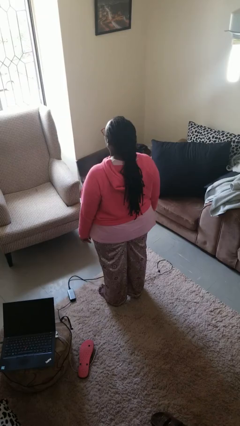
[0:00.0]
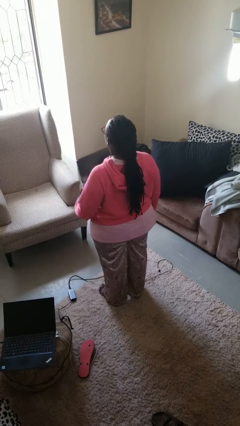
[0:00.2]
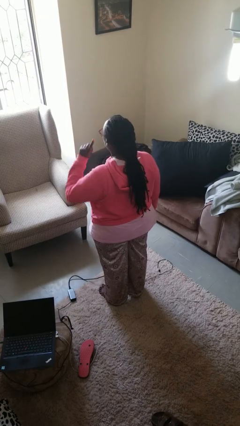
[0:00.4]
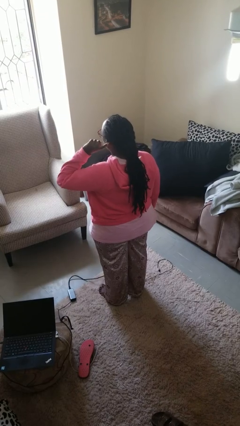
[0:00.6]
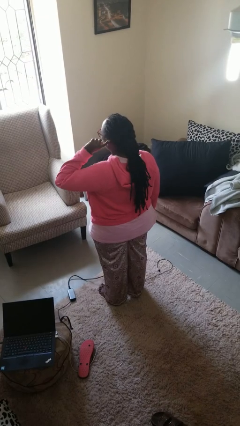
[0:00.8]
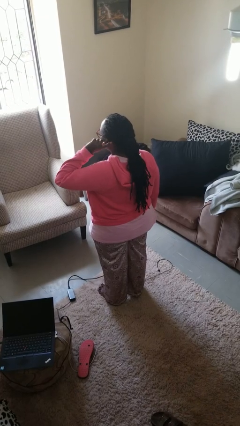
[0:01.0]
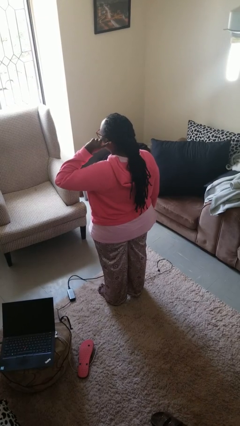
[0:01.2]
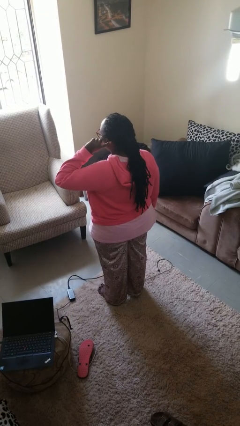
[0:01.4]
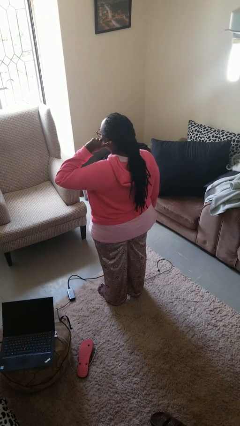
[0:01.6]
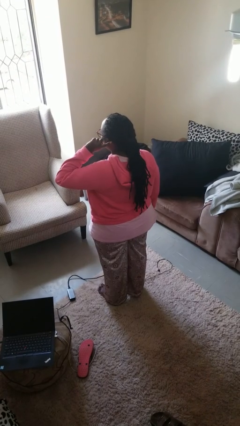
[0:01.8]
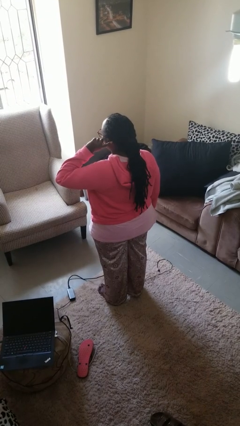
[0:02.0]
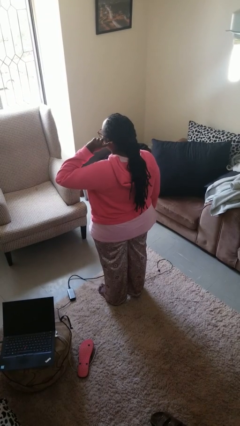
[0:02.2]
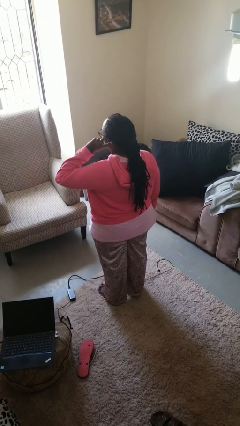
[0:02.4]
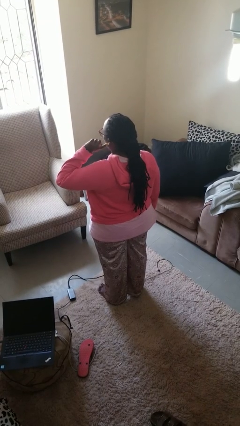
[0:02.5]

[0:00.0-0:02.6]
person gestures listen closely

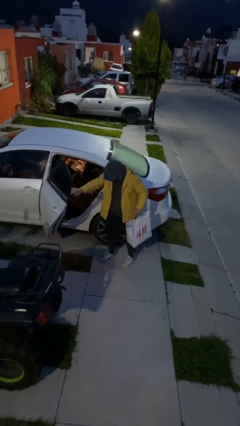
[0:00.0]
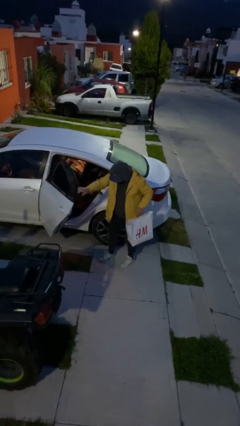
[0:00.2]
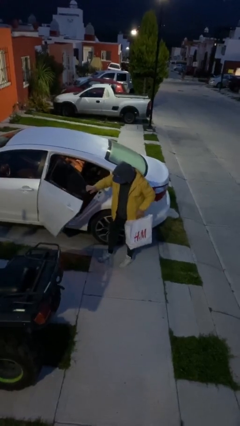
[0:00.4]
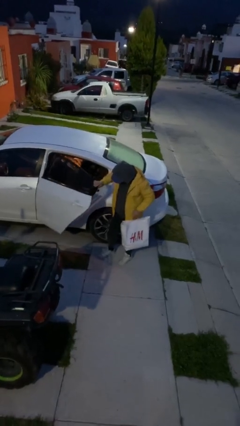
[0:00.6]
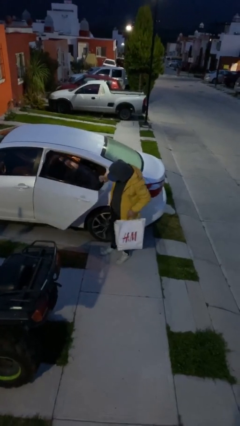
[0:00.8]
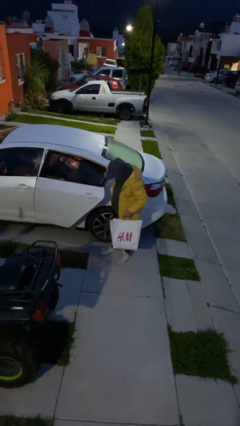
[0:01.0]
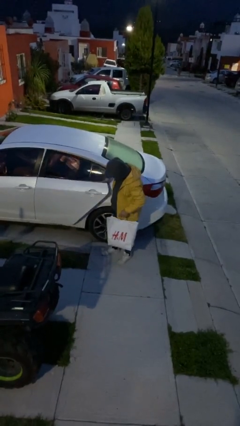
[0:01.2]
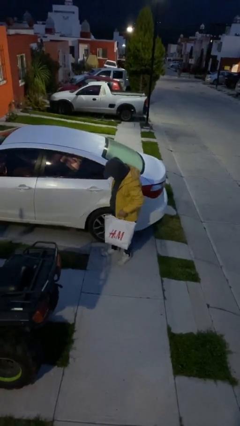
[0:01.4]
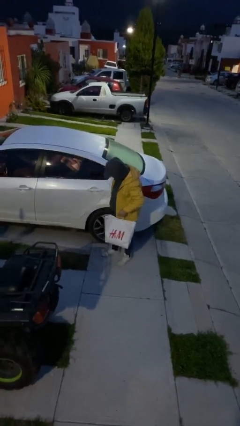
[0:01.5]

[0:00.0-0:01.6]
person closes car door

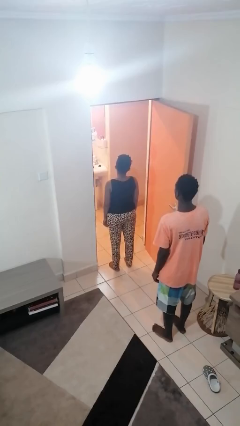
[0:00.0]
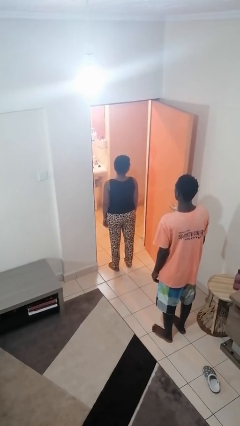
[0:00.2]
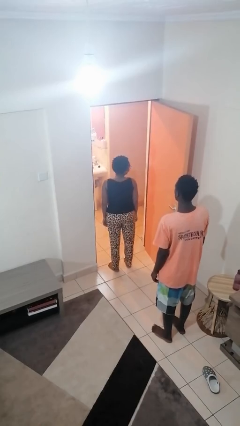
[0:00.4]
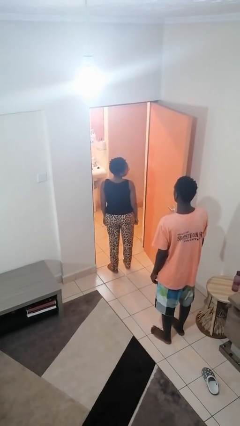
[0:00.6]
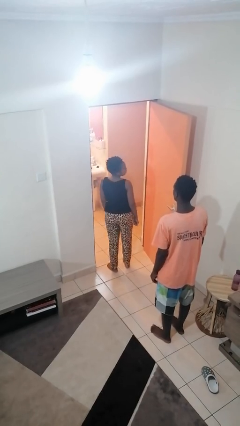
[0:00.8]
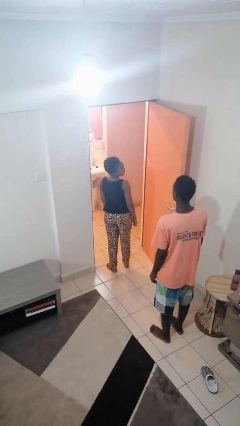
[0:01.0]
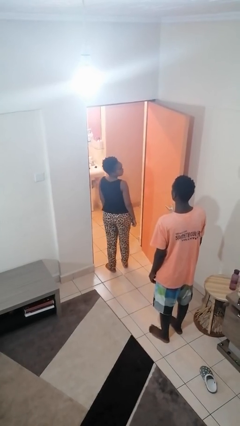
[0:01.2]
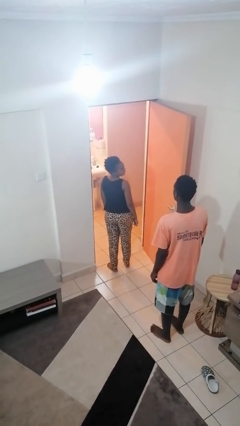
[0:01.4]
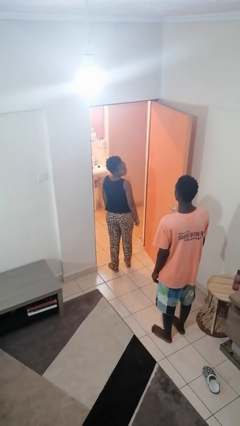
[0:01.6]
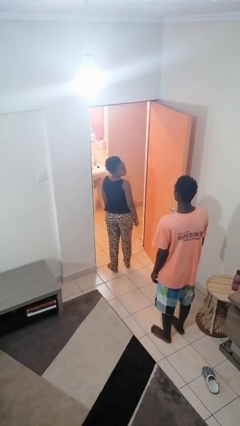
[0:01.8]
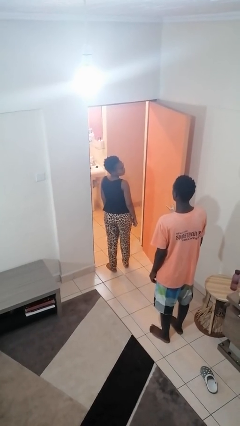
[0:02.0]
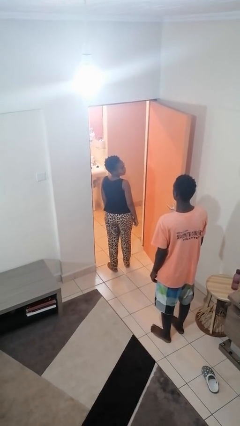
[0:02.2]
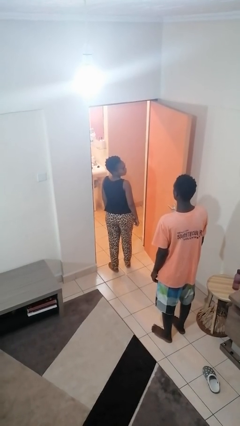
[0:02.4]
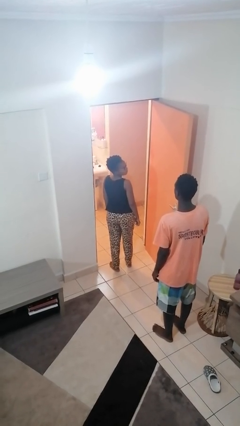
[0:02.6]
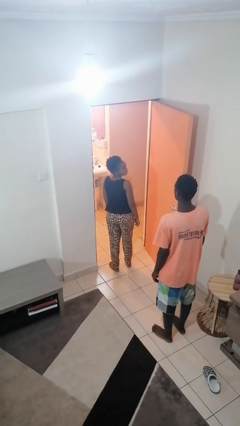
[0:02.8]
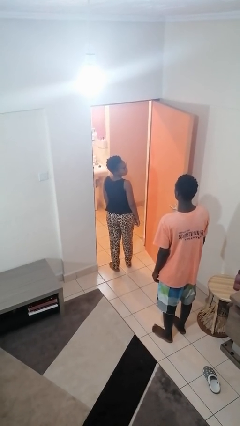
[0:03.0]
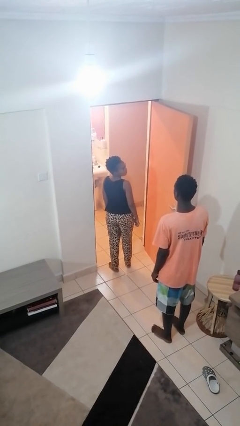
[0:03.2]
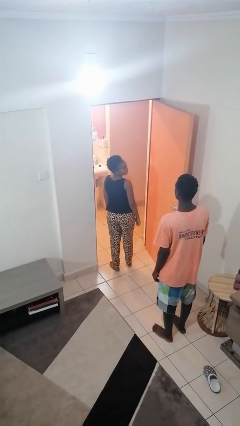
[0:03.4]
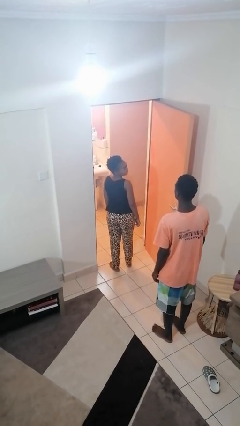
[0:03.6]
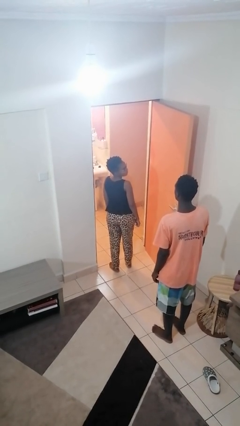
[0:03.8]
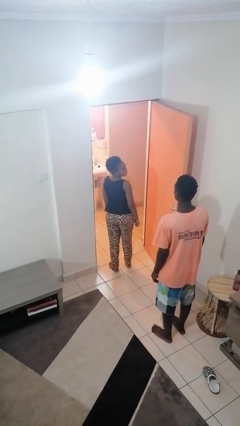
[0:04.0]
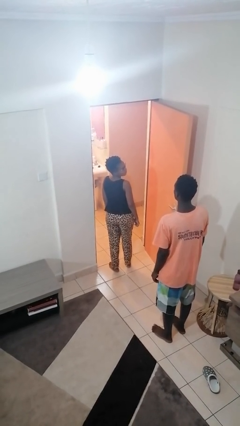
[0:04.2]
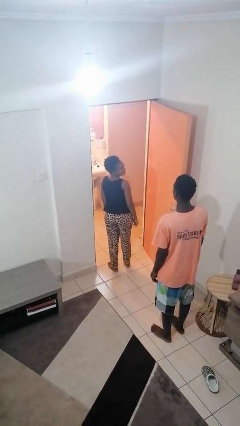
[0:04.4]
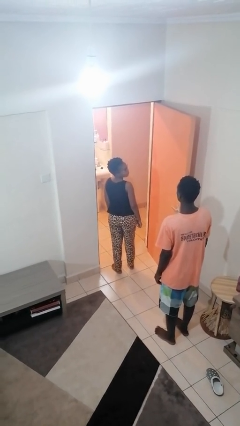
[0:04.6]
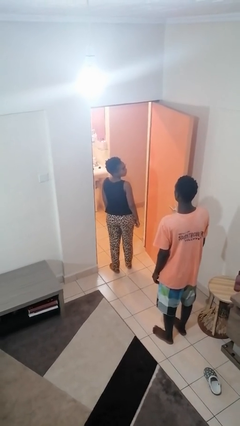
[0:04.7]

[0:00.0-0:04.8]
person looks over shoulder

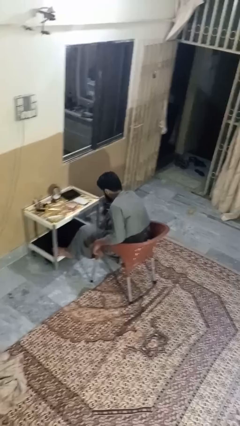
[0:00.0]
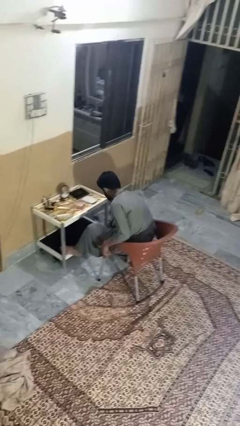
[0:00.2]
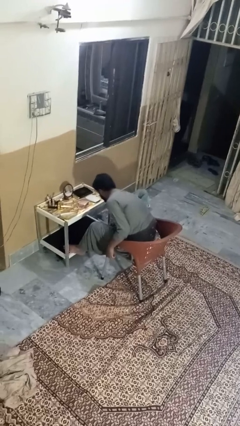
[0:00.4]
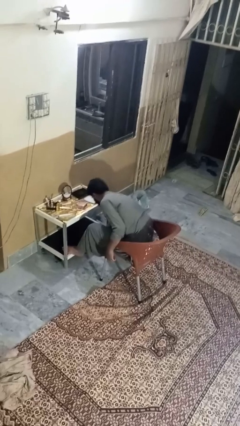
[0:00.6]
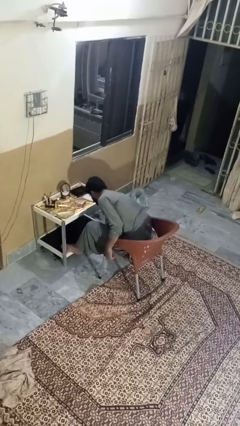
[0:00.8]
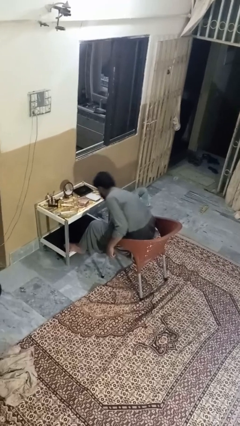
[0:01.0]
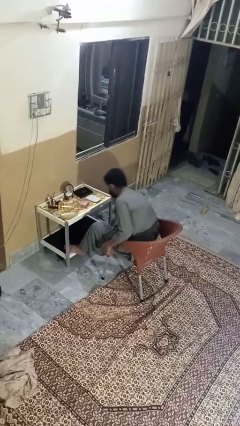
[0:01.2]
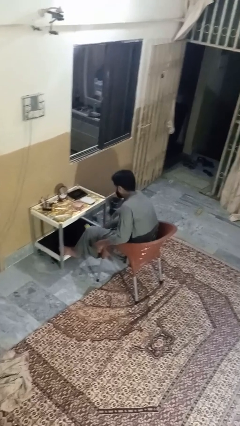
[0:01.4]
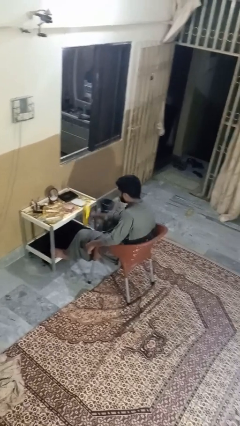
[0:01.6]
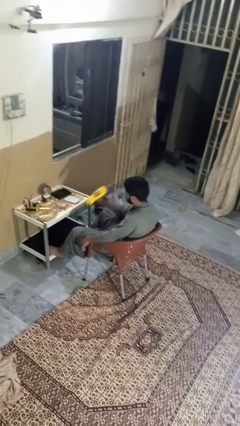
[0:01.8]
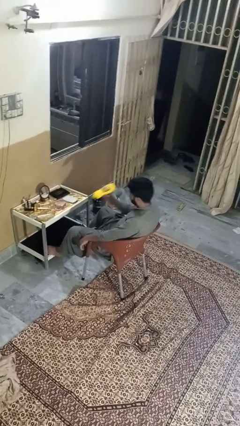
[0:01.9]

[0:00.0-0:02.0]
person picks up object from floor

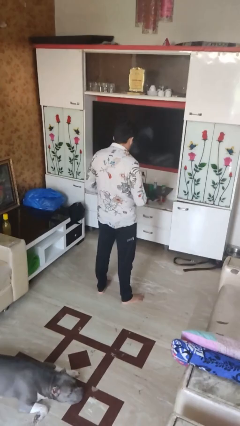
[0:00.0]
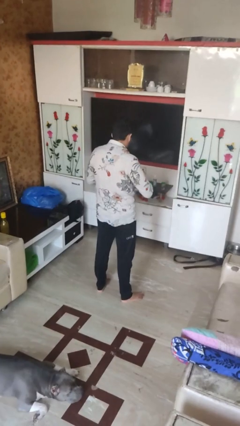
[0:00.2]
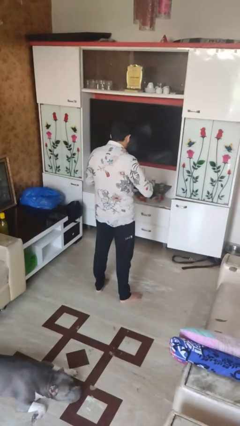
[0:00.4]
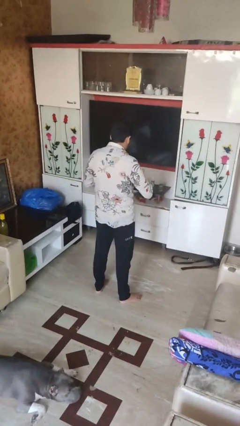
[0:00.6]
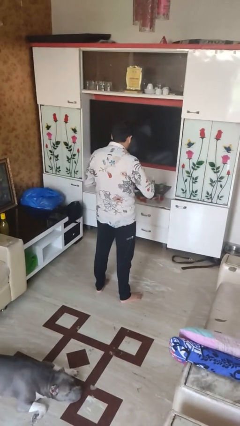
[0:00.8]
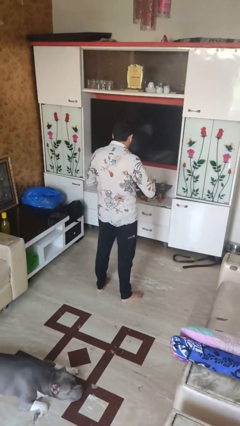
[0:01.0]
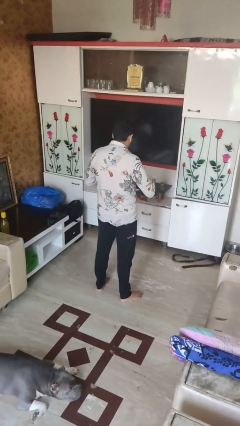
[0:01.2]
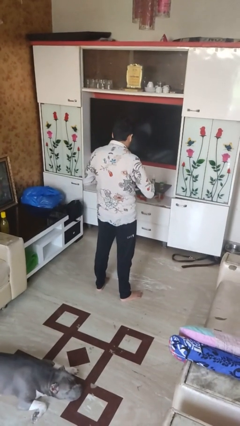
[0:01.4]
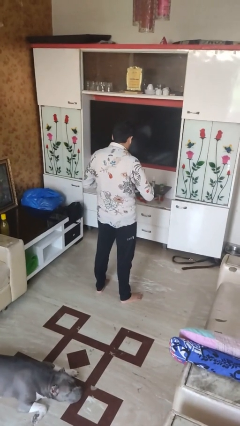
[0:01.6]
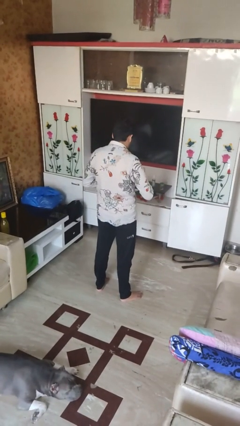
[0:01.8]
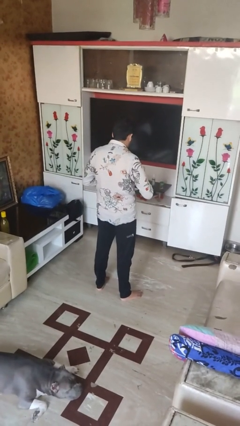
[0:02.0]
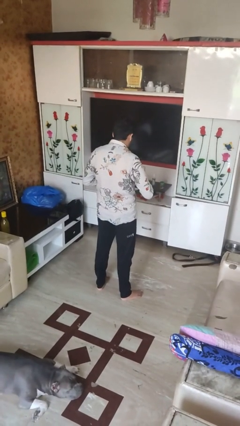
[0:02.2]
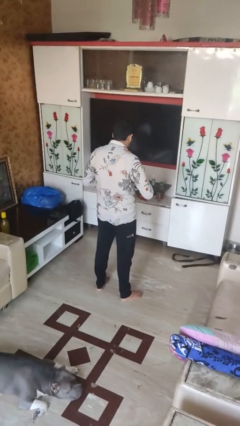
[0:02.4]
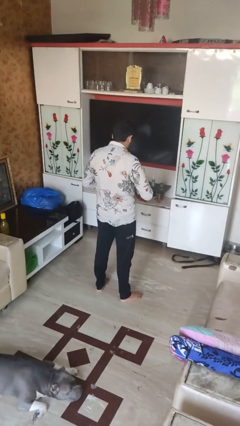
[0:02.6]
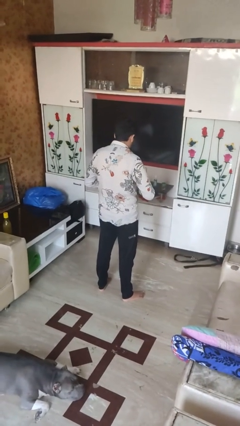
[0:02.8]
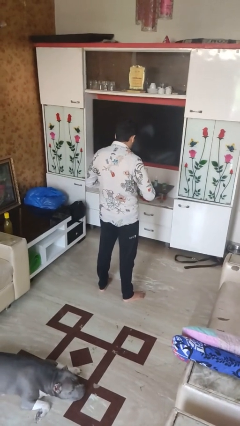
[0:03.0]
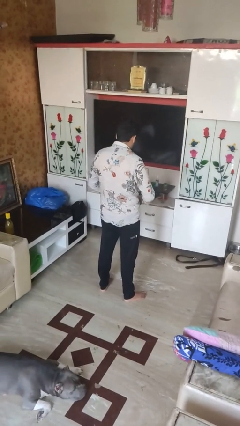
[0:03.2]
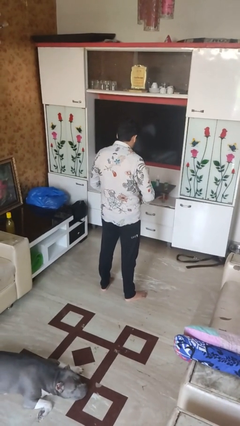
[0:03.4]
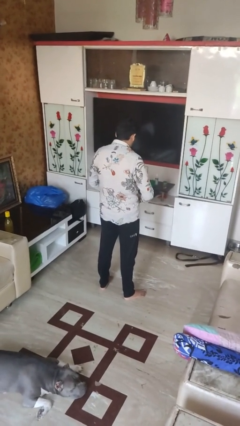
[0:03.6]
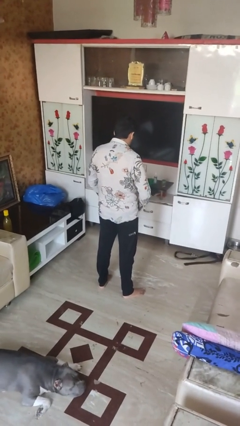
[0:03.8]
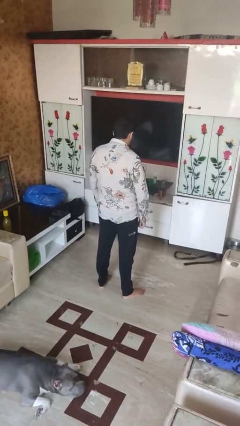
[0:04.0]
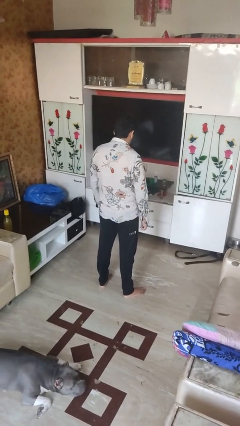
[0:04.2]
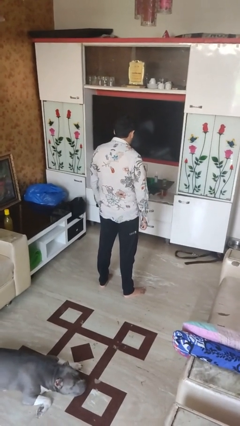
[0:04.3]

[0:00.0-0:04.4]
person unbuttons shirt

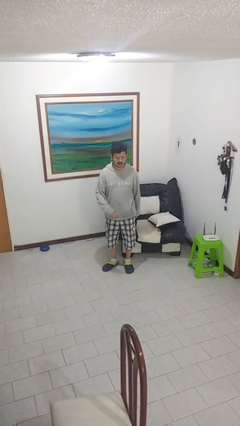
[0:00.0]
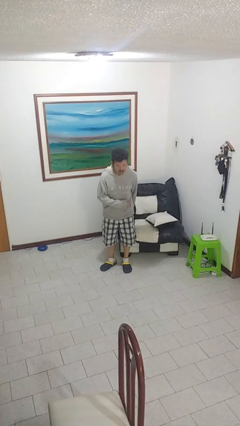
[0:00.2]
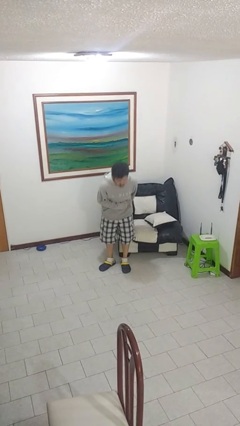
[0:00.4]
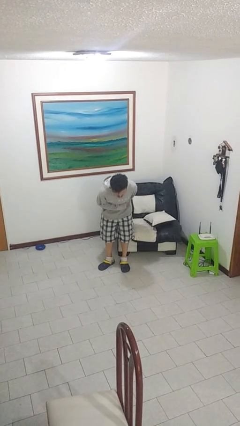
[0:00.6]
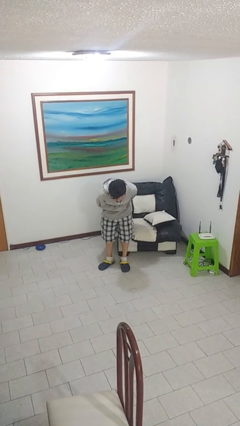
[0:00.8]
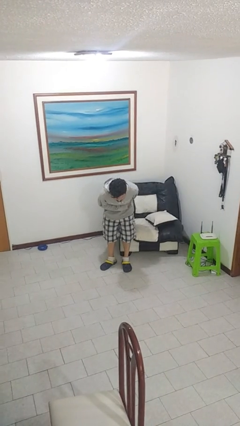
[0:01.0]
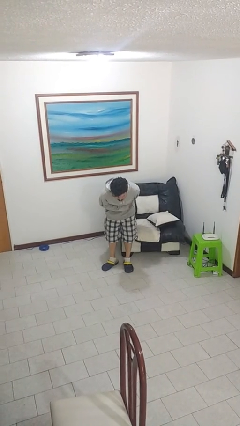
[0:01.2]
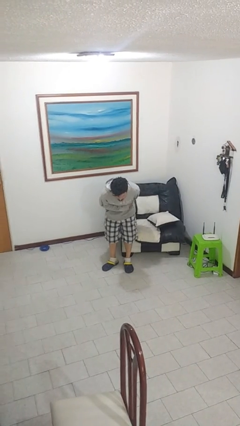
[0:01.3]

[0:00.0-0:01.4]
person bows

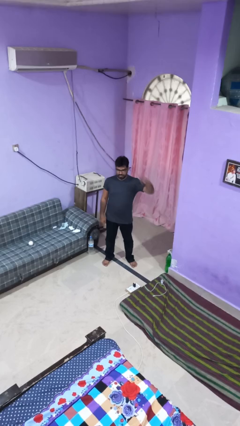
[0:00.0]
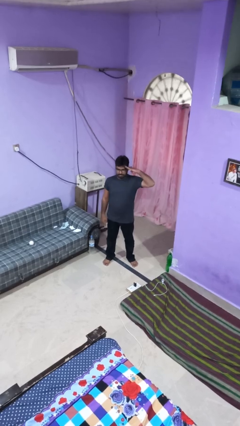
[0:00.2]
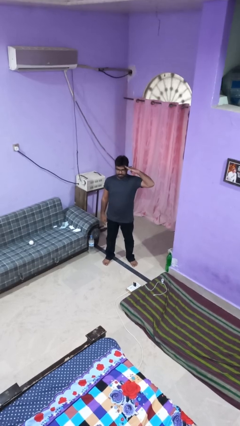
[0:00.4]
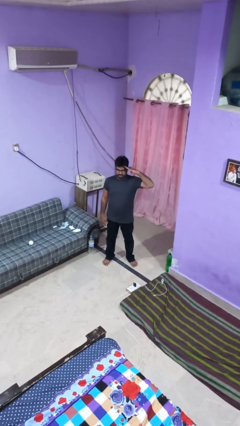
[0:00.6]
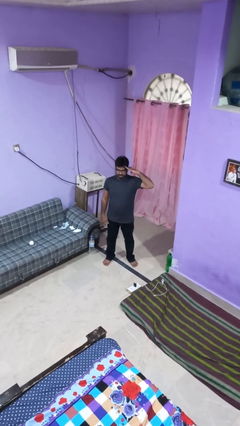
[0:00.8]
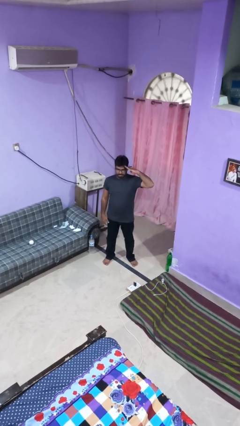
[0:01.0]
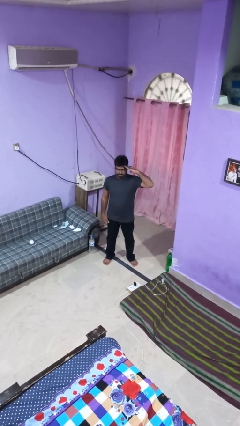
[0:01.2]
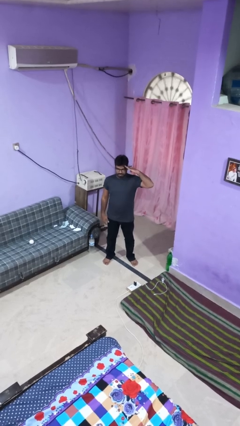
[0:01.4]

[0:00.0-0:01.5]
person salutes
